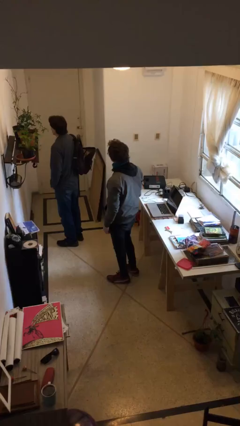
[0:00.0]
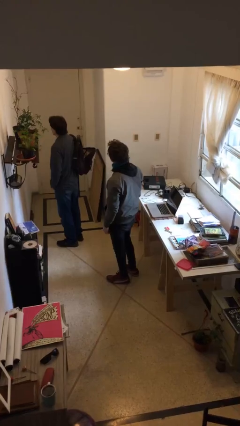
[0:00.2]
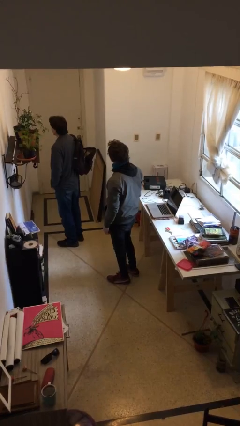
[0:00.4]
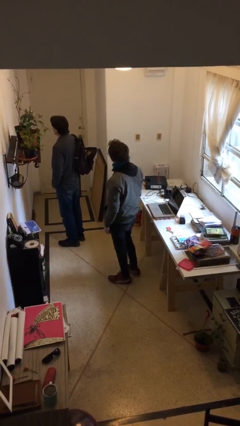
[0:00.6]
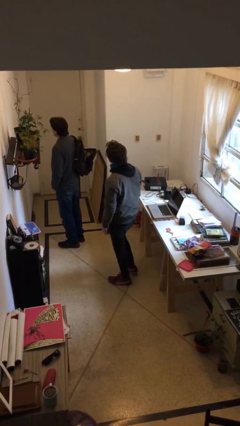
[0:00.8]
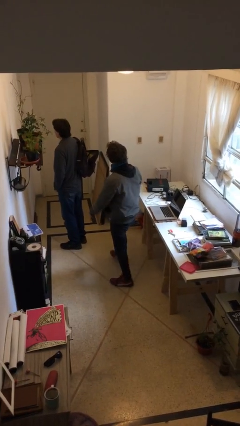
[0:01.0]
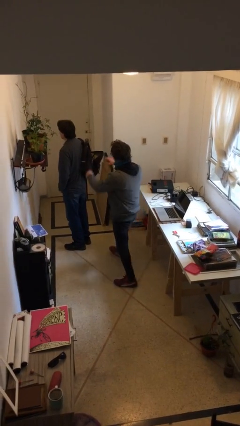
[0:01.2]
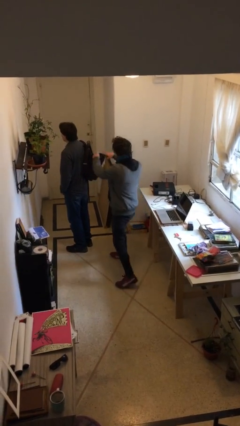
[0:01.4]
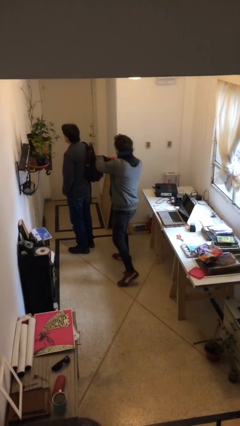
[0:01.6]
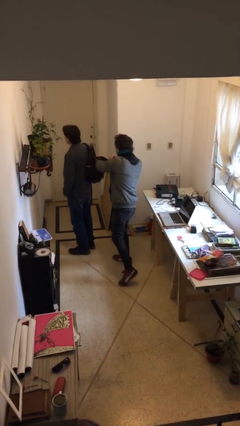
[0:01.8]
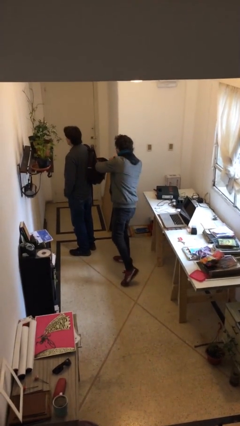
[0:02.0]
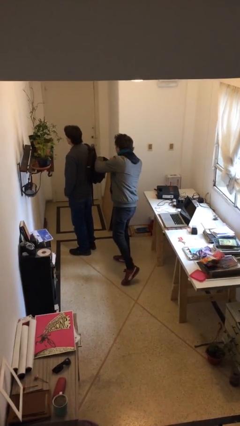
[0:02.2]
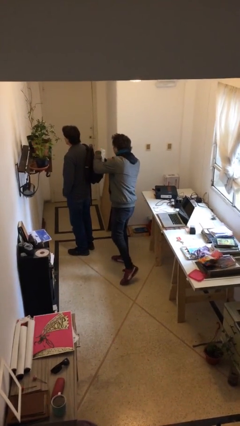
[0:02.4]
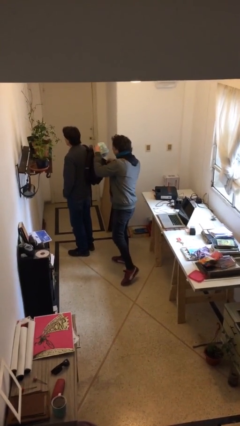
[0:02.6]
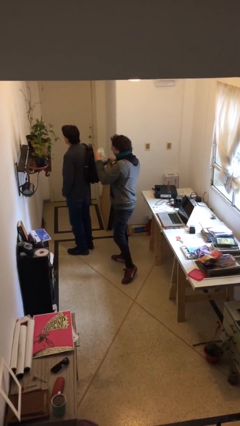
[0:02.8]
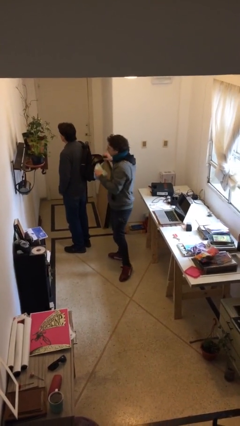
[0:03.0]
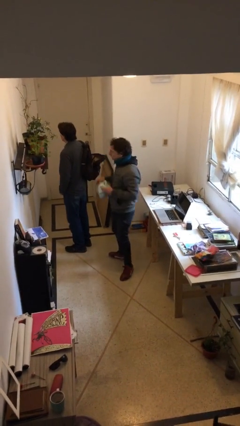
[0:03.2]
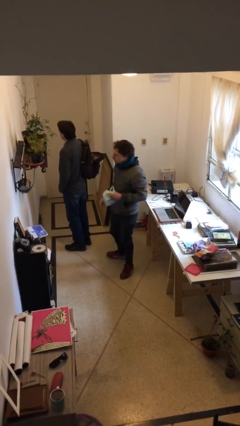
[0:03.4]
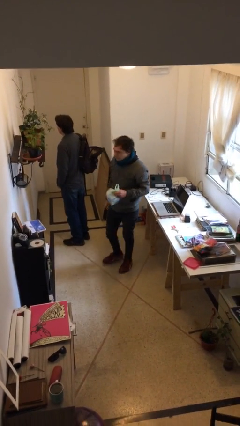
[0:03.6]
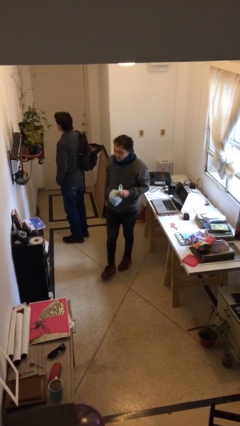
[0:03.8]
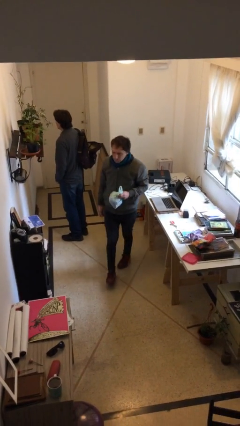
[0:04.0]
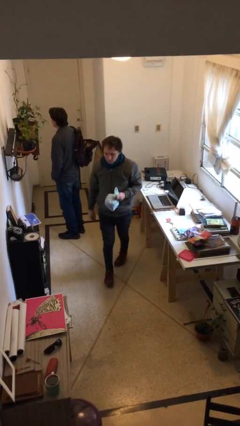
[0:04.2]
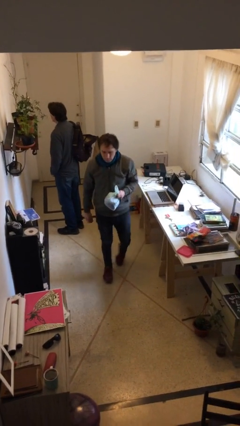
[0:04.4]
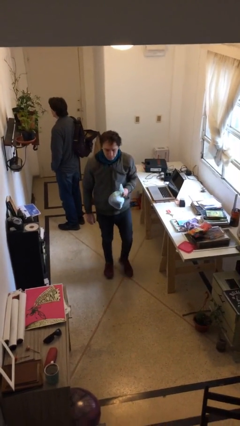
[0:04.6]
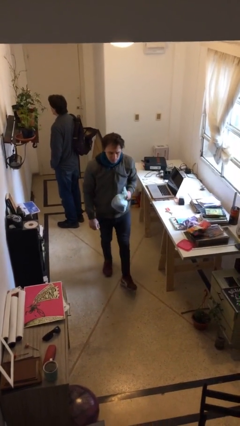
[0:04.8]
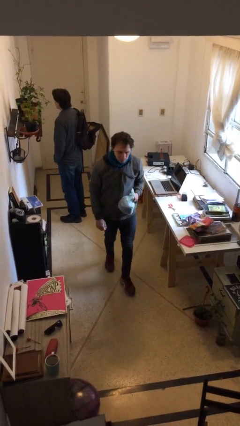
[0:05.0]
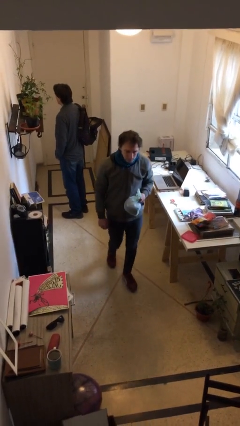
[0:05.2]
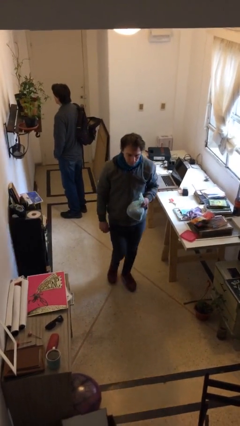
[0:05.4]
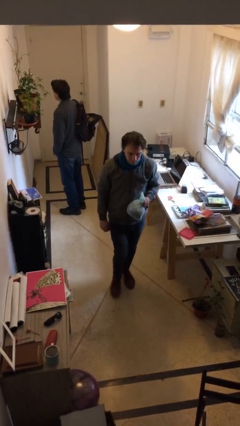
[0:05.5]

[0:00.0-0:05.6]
person steals object from person

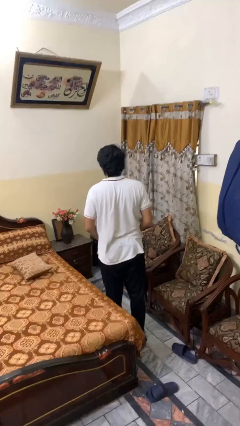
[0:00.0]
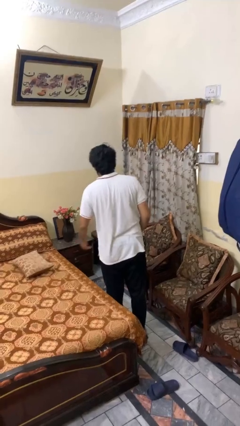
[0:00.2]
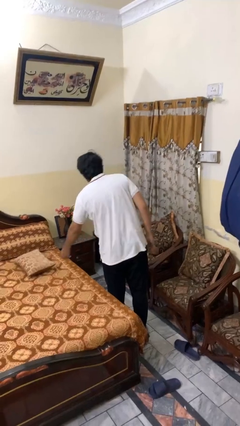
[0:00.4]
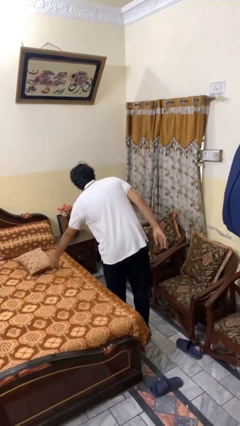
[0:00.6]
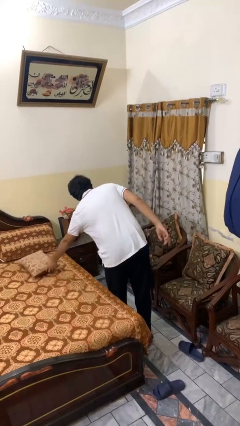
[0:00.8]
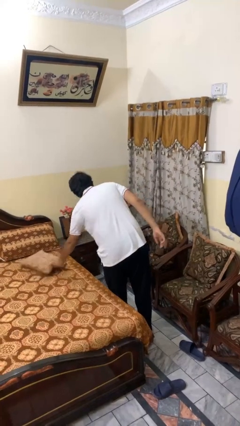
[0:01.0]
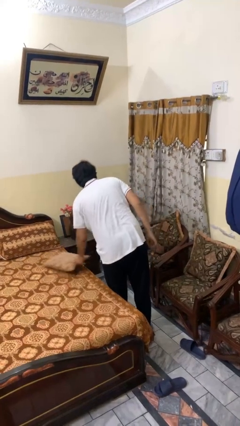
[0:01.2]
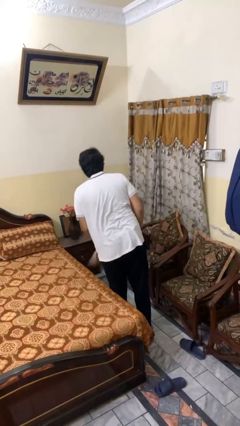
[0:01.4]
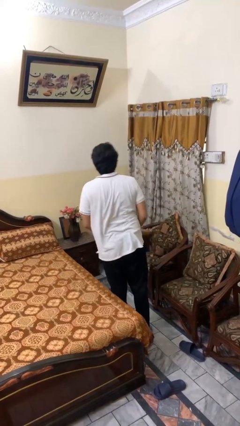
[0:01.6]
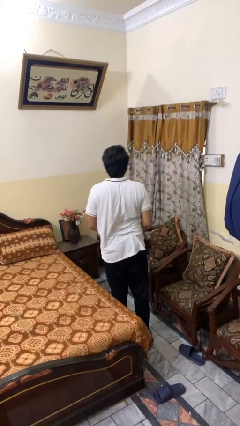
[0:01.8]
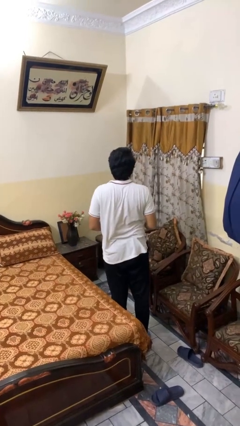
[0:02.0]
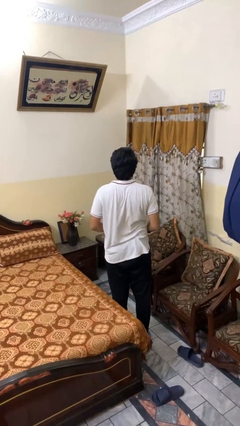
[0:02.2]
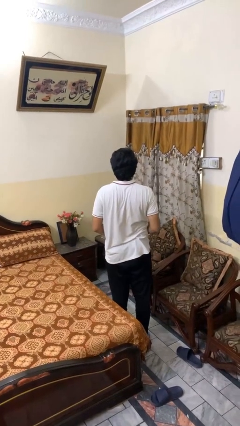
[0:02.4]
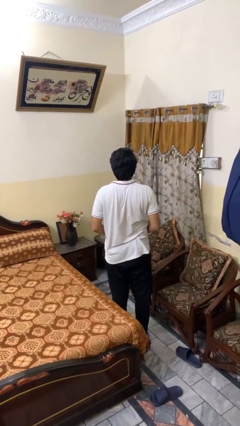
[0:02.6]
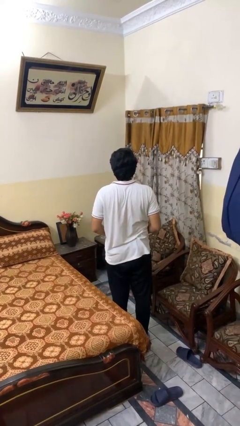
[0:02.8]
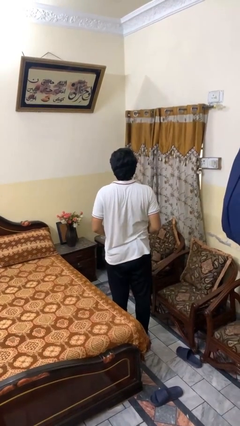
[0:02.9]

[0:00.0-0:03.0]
person picks up object from bed

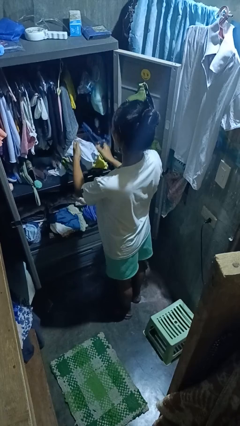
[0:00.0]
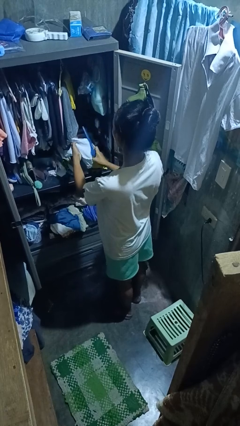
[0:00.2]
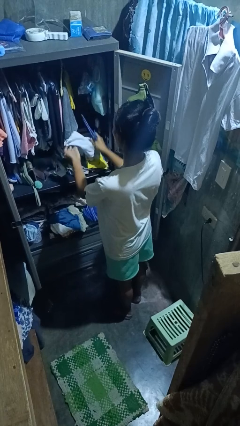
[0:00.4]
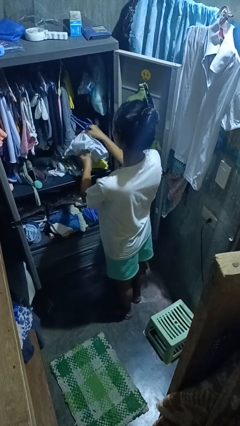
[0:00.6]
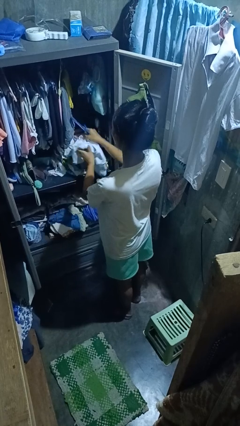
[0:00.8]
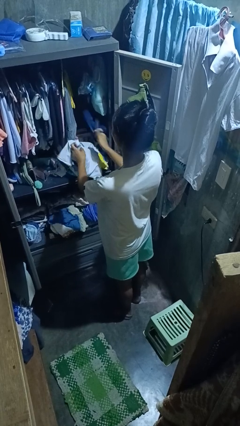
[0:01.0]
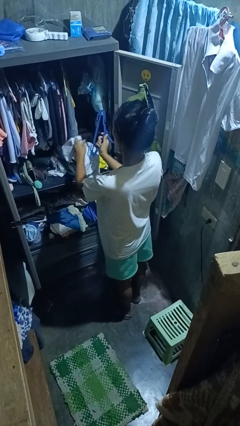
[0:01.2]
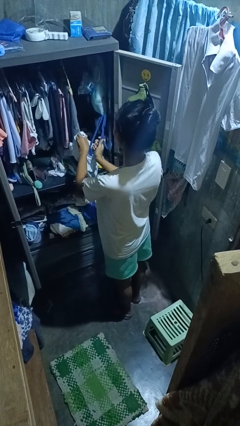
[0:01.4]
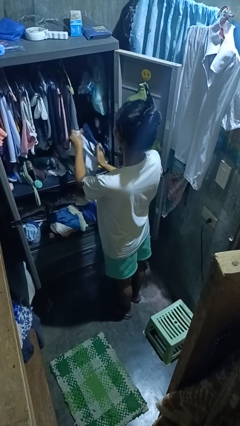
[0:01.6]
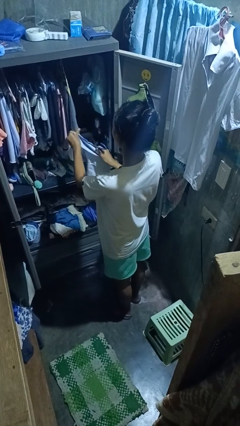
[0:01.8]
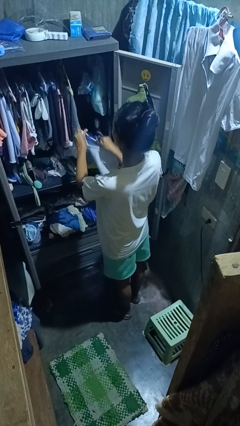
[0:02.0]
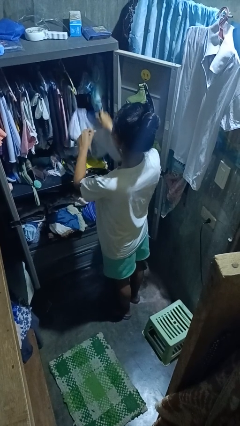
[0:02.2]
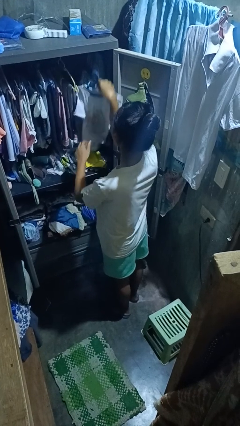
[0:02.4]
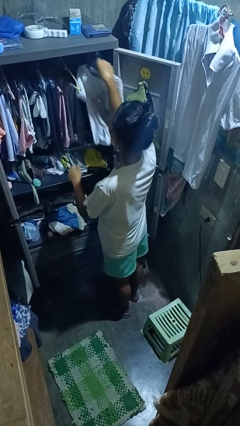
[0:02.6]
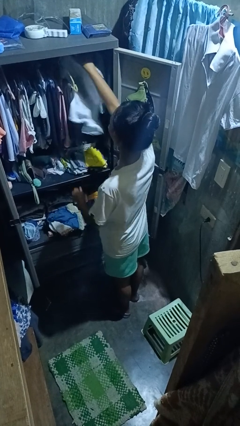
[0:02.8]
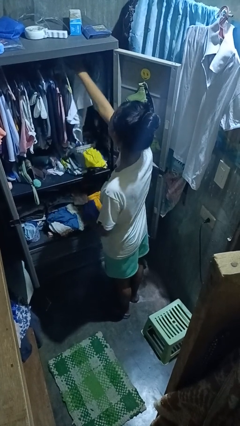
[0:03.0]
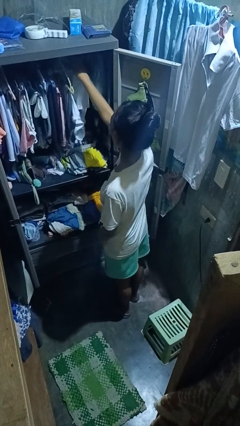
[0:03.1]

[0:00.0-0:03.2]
person puts clothes into closet

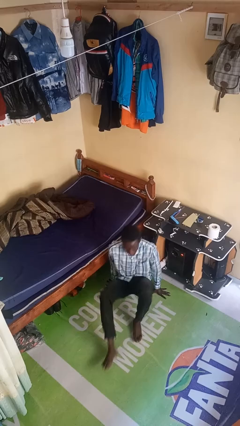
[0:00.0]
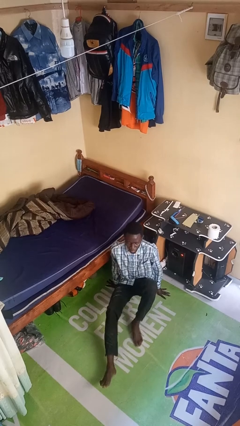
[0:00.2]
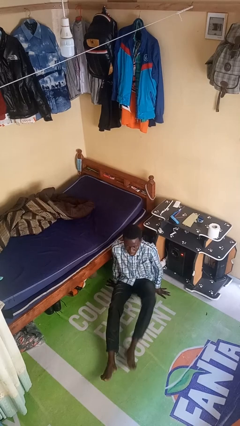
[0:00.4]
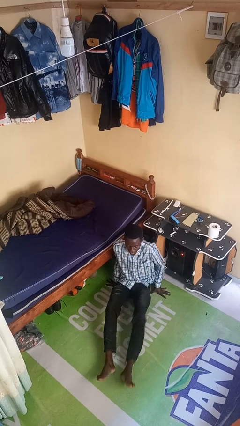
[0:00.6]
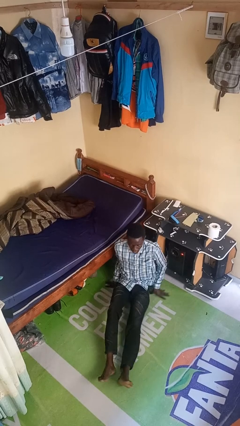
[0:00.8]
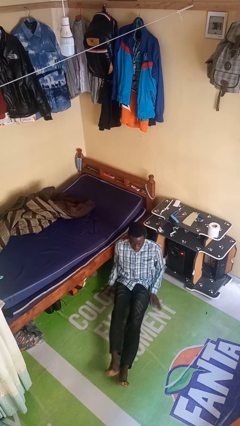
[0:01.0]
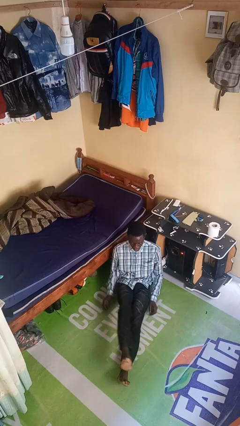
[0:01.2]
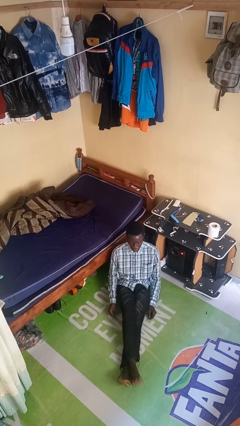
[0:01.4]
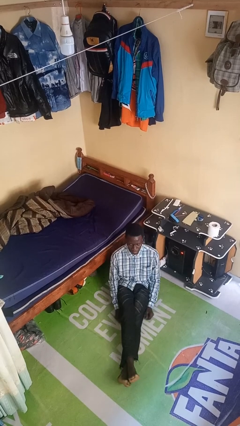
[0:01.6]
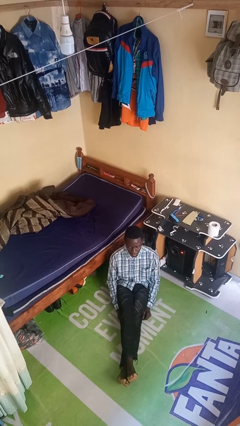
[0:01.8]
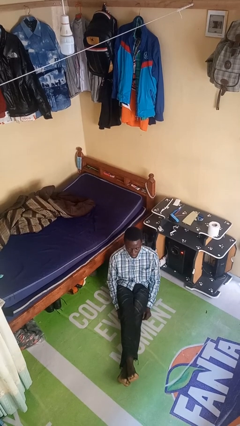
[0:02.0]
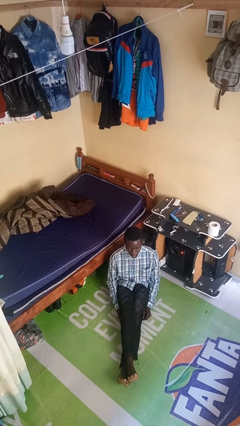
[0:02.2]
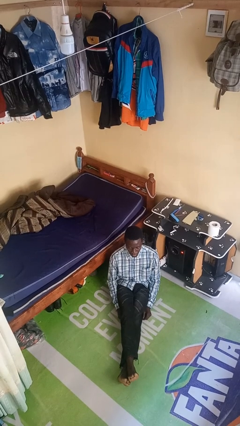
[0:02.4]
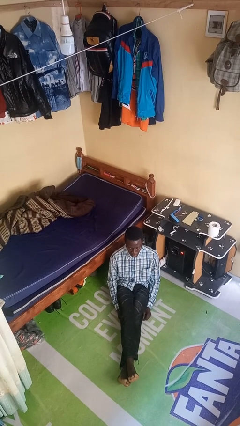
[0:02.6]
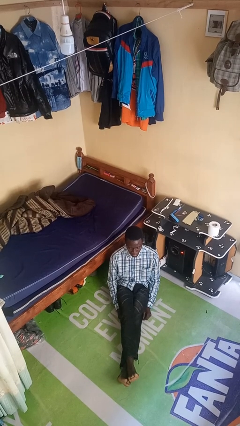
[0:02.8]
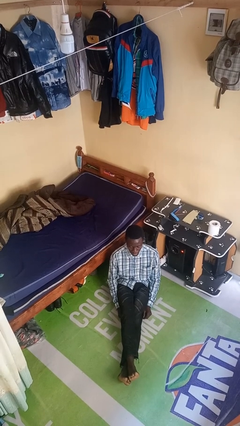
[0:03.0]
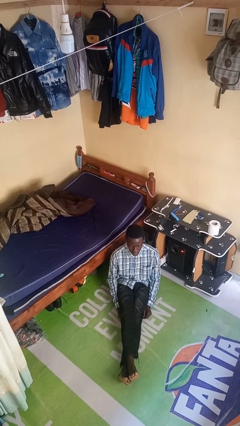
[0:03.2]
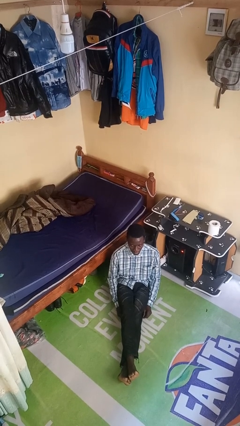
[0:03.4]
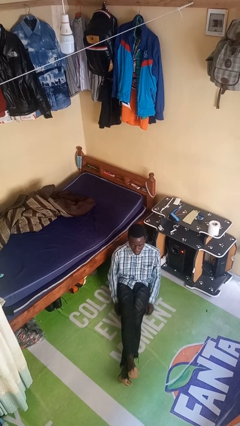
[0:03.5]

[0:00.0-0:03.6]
person sits crisscross

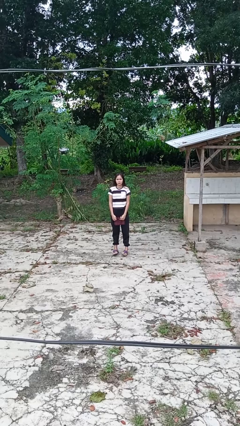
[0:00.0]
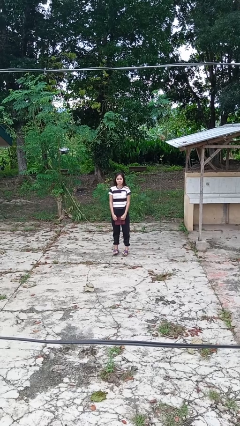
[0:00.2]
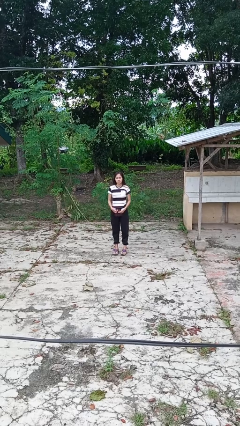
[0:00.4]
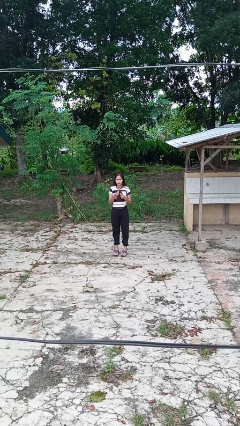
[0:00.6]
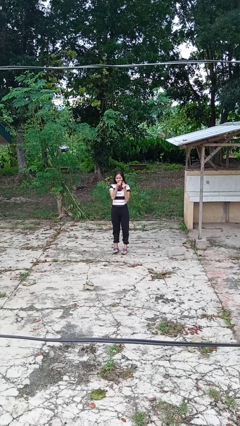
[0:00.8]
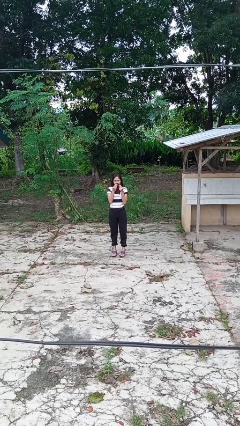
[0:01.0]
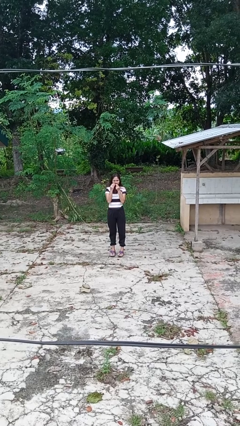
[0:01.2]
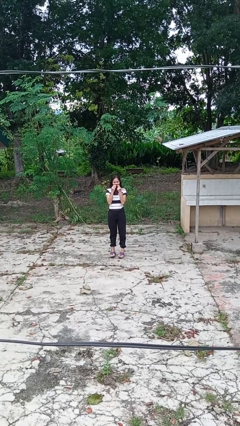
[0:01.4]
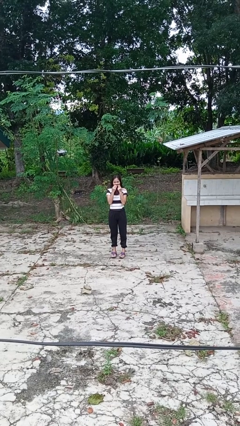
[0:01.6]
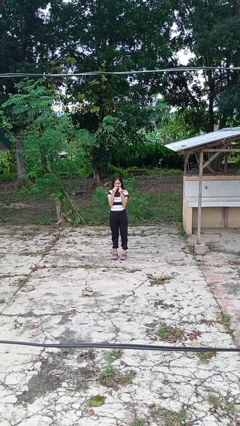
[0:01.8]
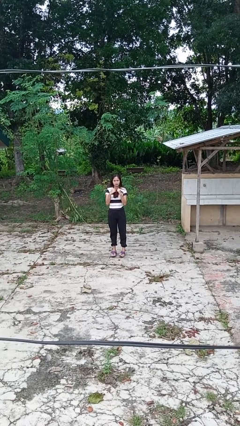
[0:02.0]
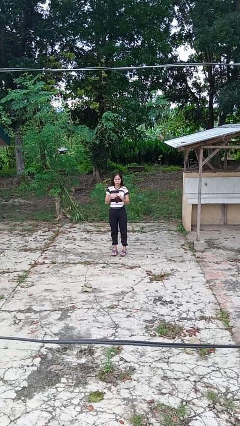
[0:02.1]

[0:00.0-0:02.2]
person wipes mouth with napkin

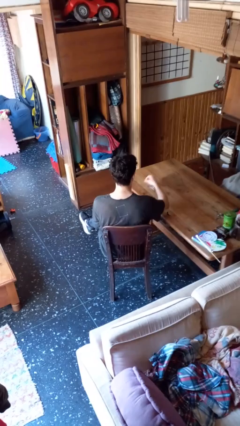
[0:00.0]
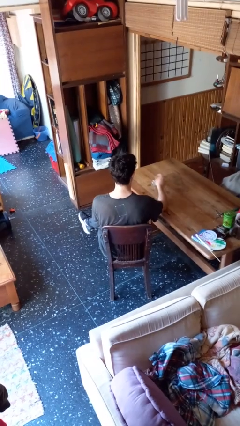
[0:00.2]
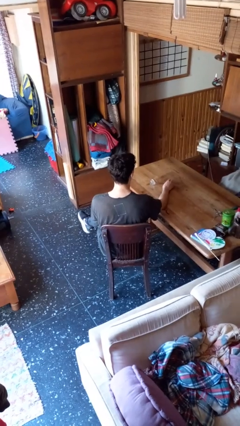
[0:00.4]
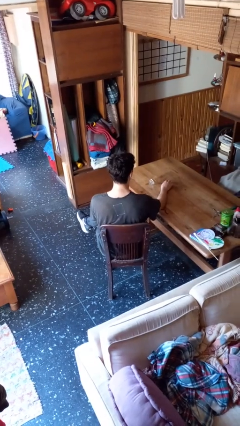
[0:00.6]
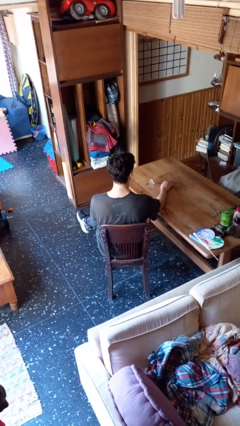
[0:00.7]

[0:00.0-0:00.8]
person knocks over glass
